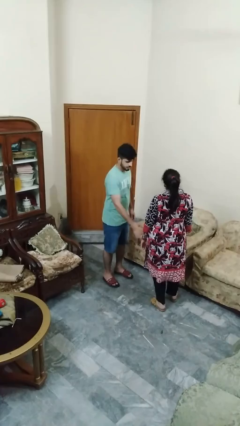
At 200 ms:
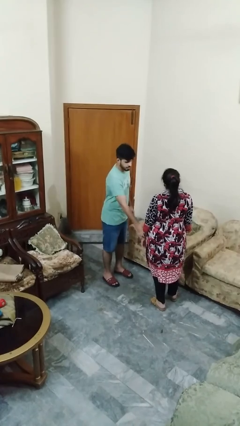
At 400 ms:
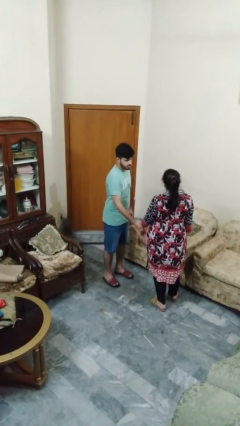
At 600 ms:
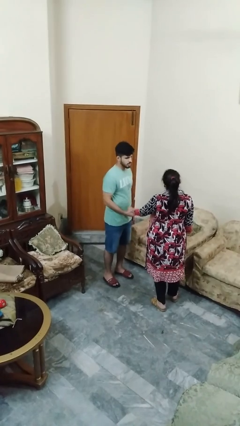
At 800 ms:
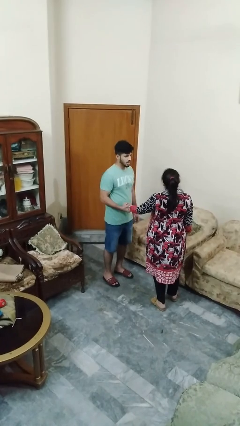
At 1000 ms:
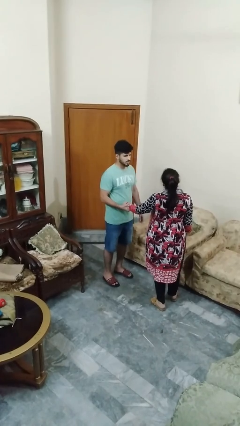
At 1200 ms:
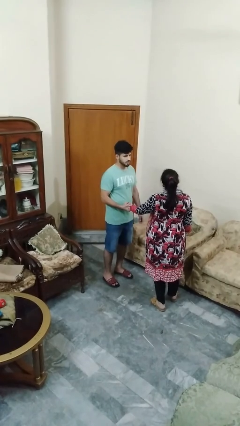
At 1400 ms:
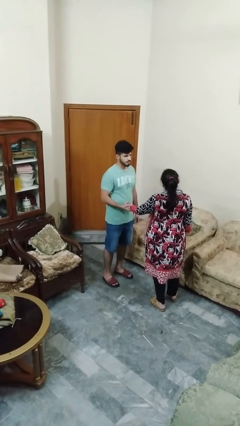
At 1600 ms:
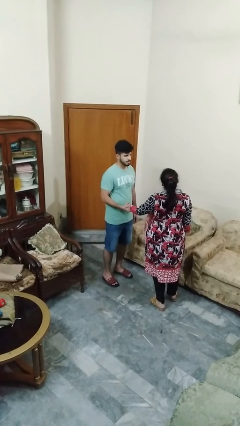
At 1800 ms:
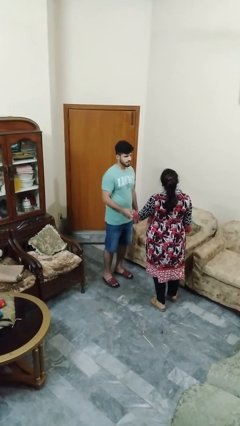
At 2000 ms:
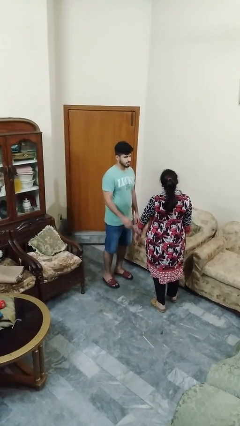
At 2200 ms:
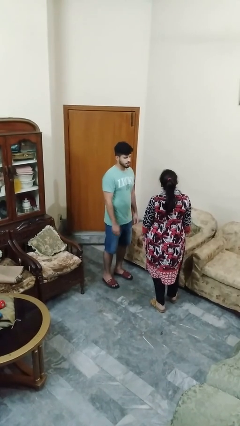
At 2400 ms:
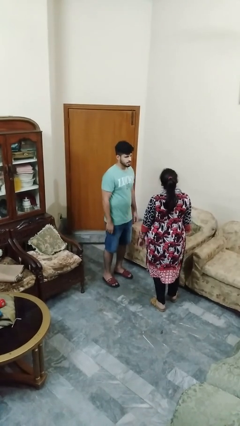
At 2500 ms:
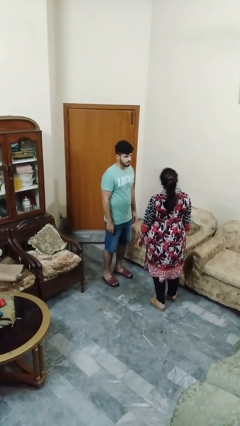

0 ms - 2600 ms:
person grabs person by forearm

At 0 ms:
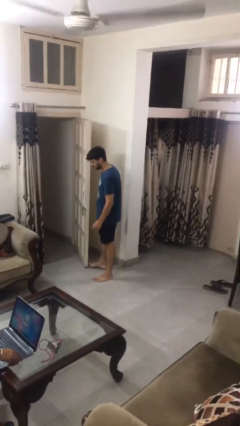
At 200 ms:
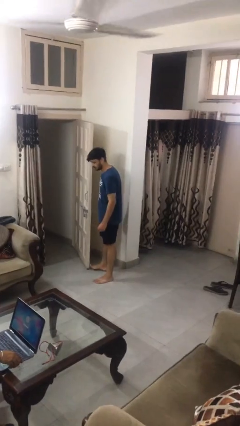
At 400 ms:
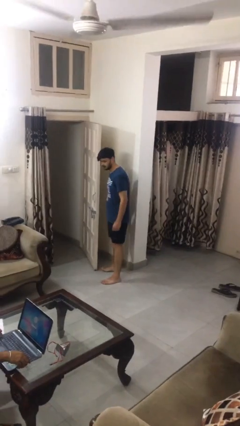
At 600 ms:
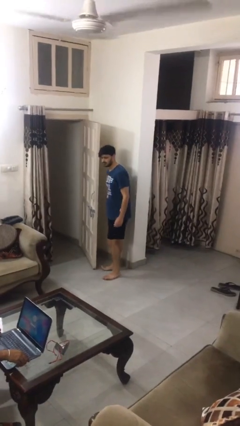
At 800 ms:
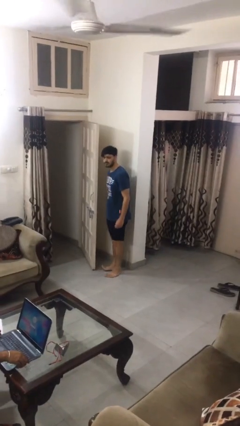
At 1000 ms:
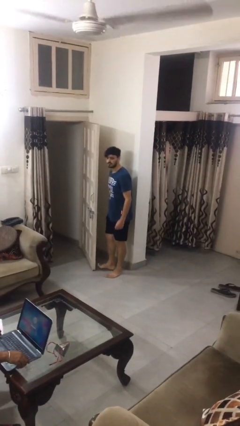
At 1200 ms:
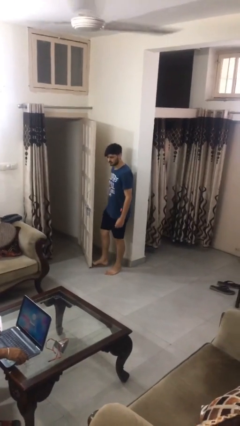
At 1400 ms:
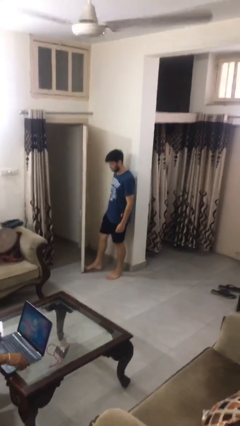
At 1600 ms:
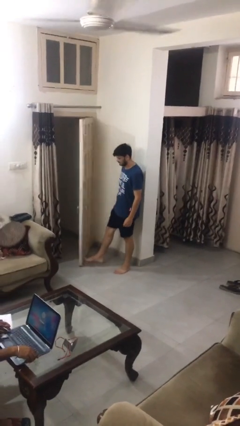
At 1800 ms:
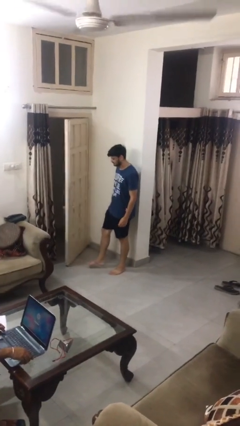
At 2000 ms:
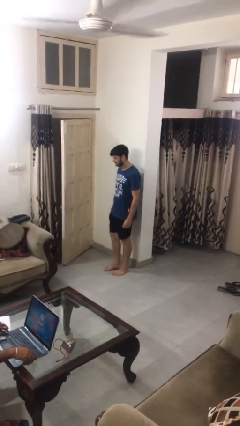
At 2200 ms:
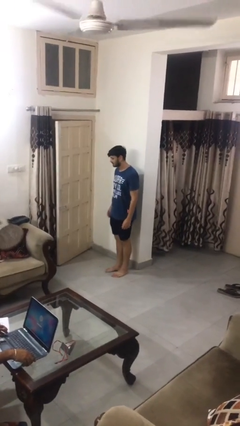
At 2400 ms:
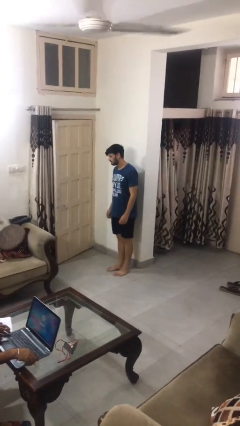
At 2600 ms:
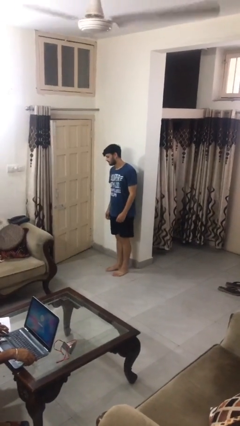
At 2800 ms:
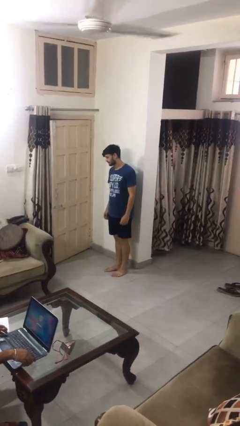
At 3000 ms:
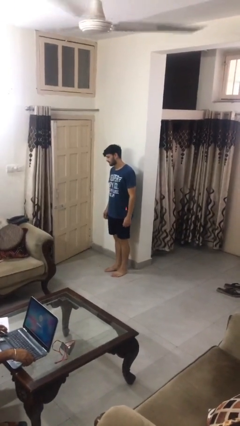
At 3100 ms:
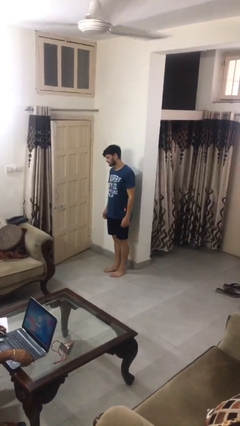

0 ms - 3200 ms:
person closes door with foot

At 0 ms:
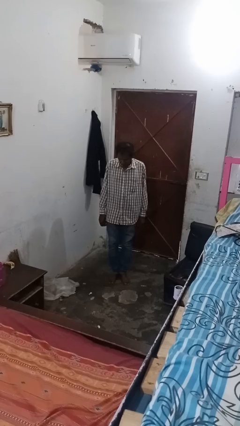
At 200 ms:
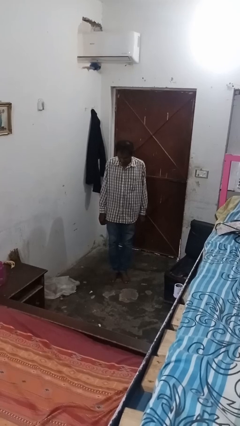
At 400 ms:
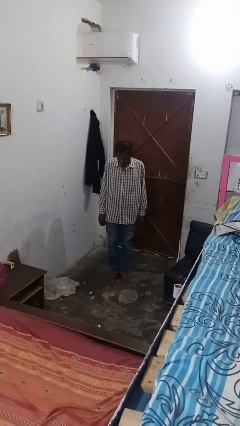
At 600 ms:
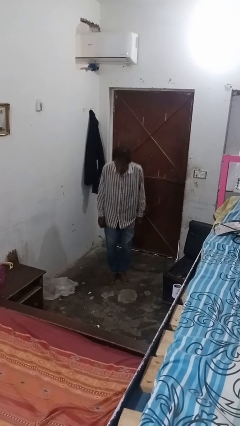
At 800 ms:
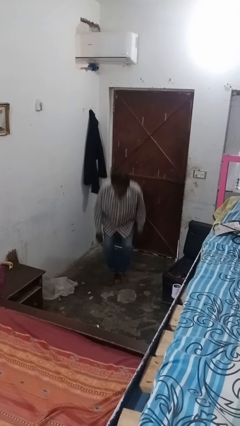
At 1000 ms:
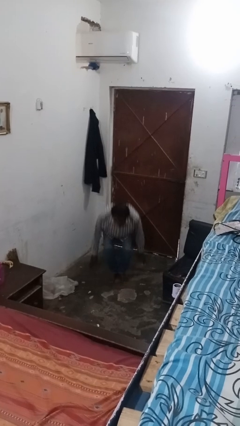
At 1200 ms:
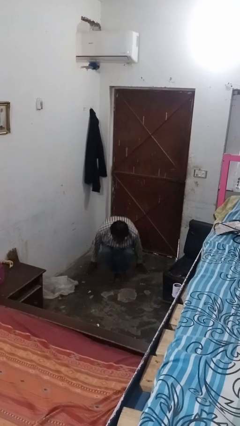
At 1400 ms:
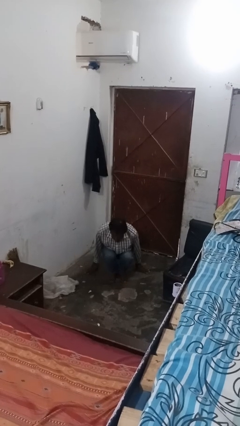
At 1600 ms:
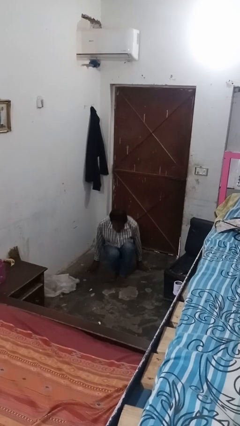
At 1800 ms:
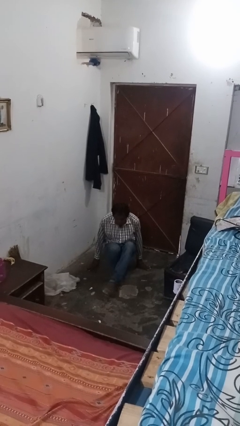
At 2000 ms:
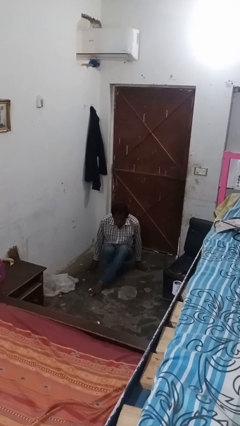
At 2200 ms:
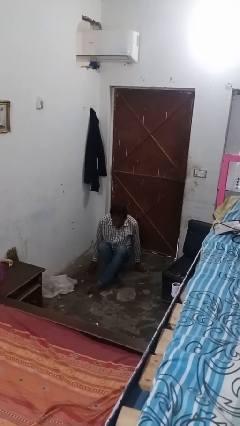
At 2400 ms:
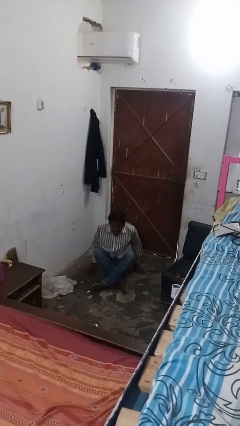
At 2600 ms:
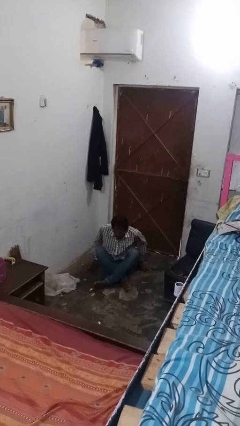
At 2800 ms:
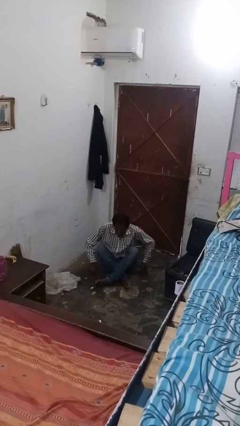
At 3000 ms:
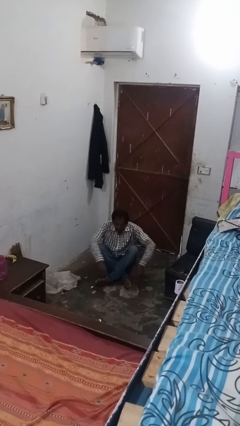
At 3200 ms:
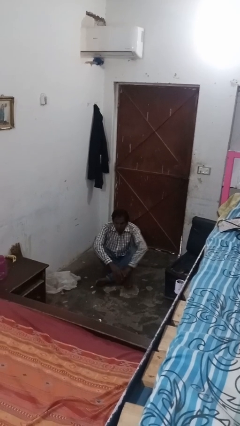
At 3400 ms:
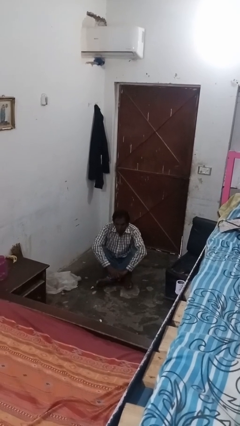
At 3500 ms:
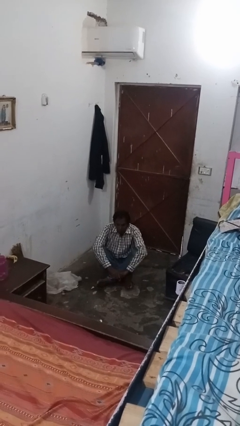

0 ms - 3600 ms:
person sits crisscross

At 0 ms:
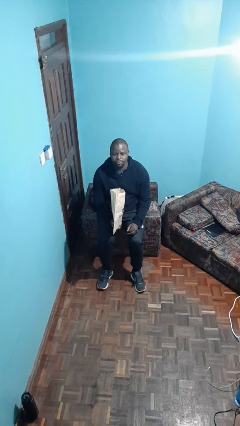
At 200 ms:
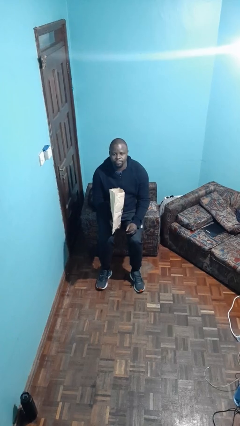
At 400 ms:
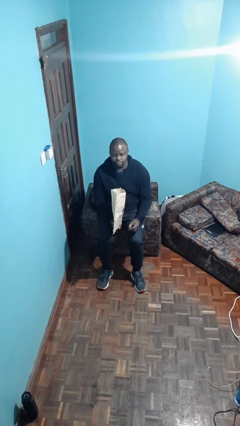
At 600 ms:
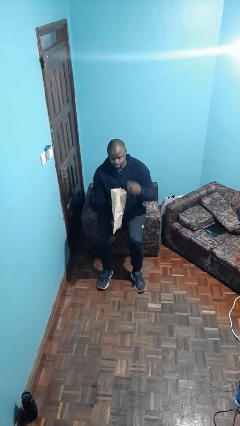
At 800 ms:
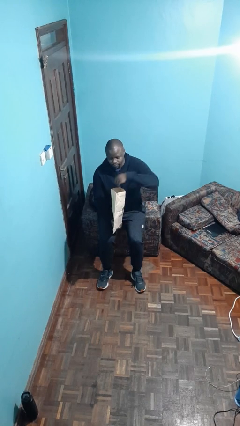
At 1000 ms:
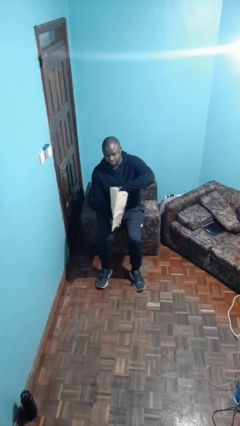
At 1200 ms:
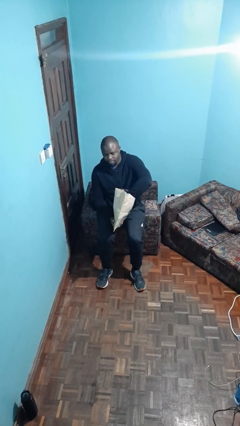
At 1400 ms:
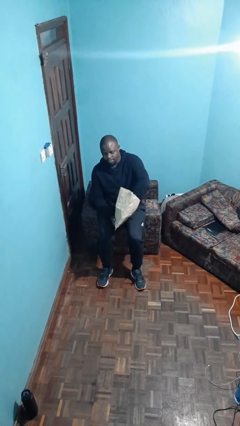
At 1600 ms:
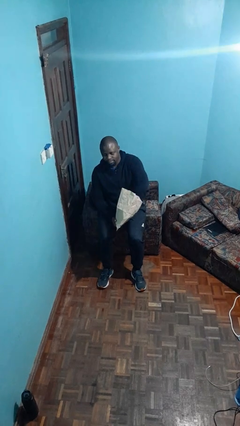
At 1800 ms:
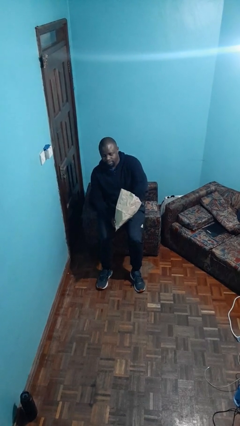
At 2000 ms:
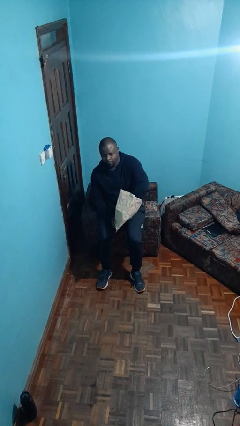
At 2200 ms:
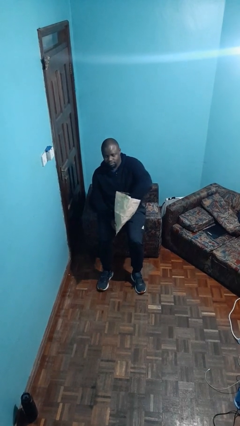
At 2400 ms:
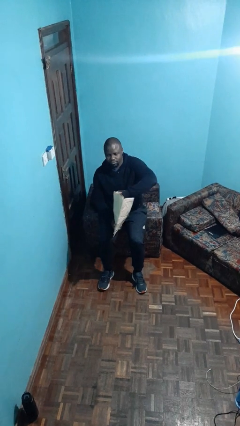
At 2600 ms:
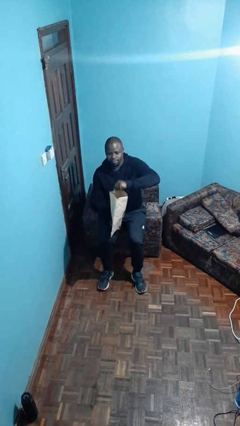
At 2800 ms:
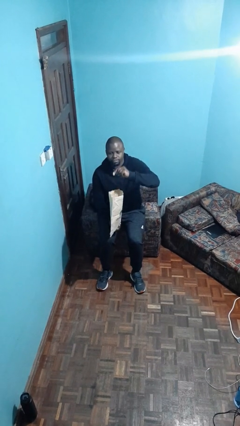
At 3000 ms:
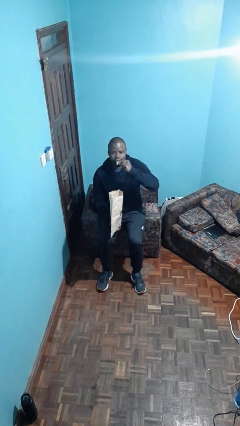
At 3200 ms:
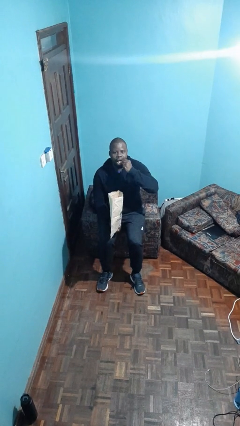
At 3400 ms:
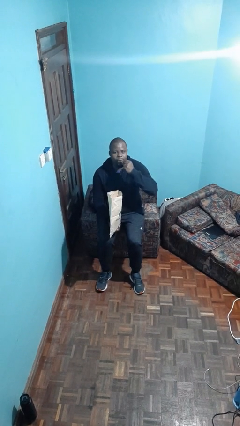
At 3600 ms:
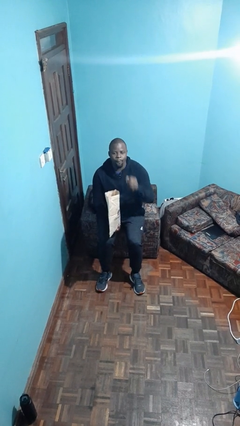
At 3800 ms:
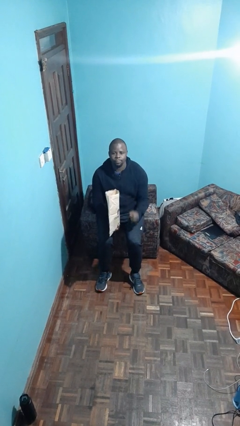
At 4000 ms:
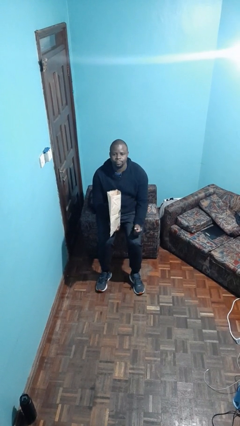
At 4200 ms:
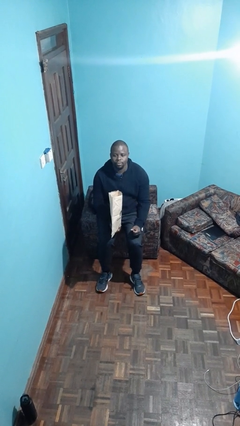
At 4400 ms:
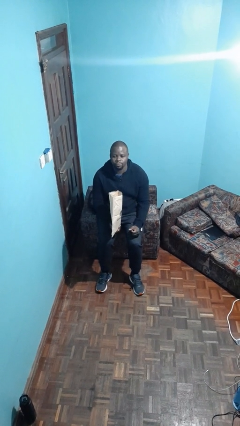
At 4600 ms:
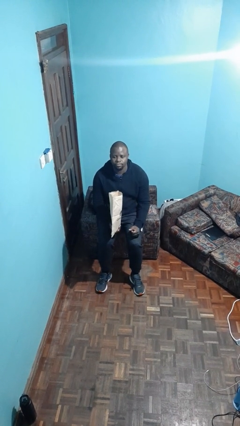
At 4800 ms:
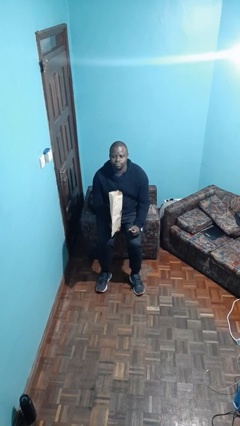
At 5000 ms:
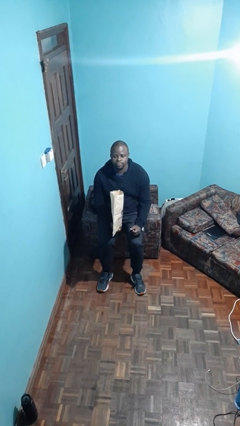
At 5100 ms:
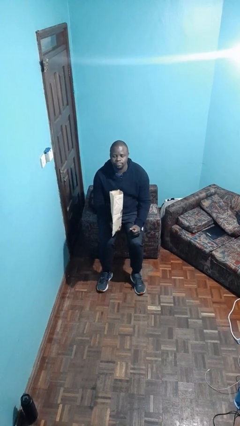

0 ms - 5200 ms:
person eats snack from bag

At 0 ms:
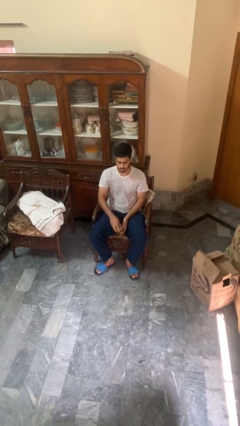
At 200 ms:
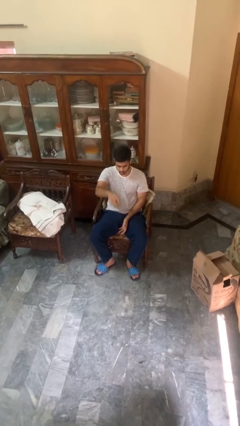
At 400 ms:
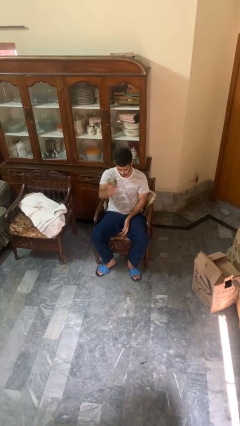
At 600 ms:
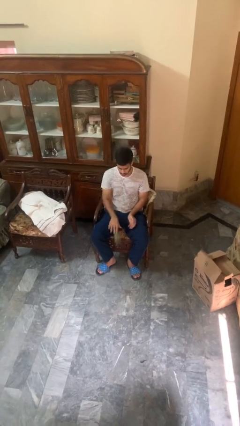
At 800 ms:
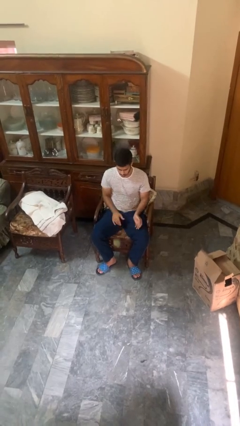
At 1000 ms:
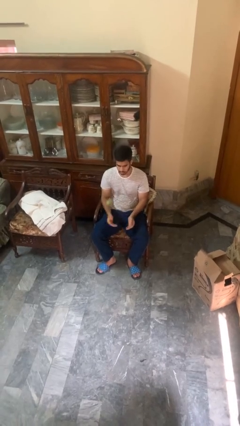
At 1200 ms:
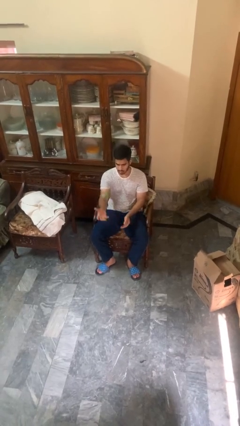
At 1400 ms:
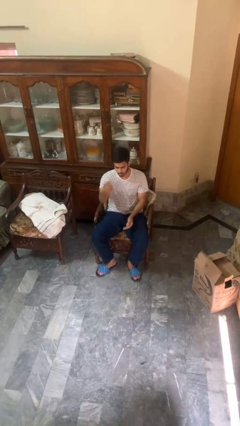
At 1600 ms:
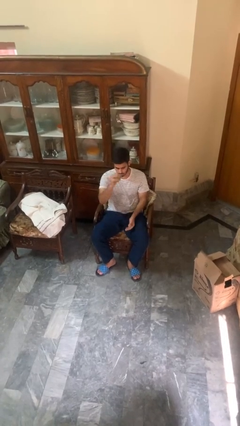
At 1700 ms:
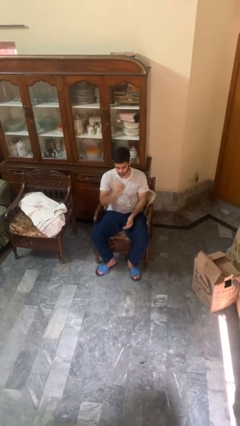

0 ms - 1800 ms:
person bounces ball on floor

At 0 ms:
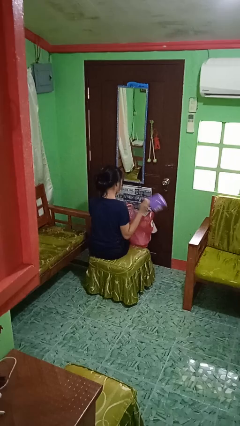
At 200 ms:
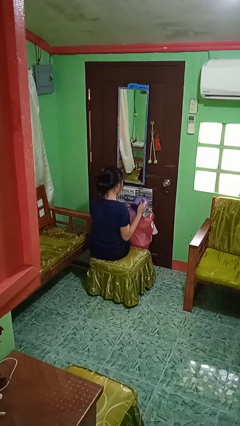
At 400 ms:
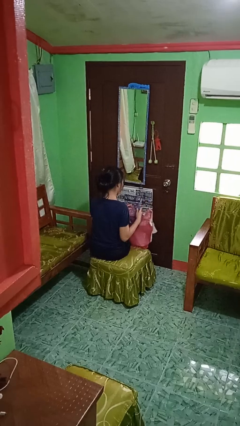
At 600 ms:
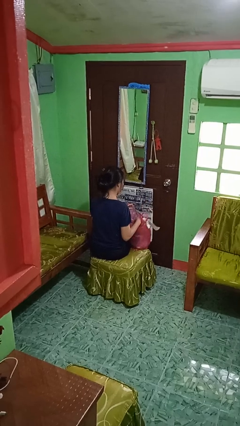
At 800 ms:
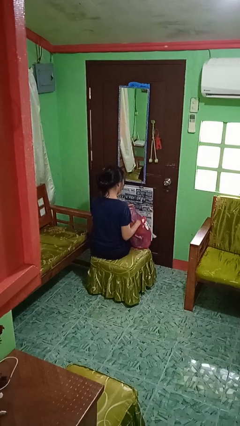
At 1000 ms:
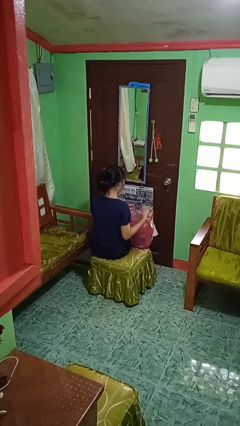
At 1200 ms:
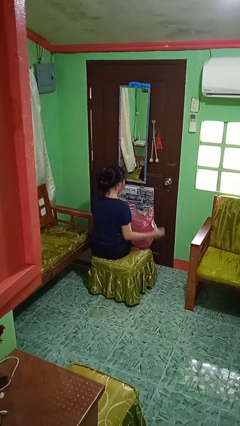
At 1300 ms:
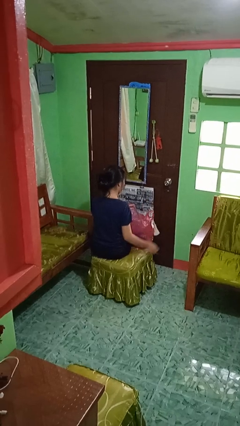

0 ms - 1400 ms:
person puts object into bag
